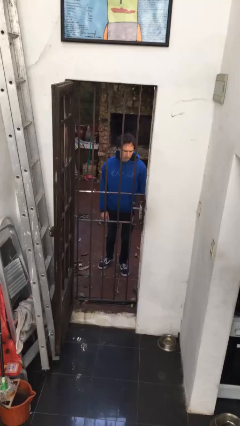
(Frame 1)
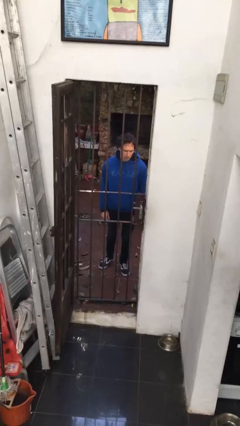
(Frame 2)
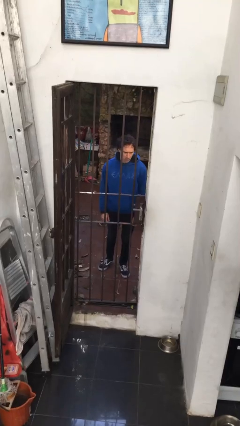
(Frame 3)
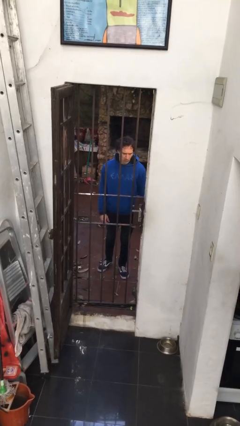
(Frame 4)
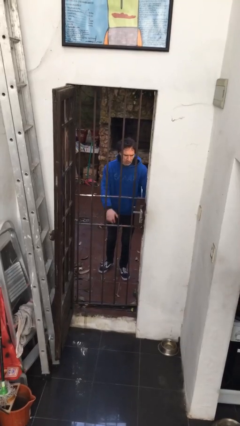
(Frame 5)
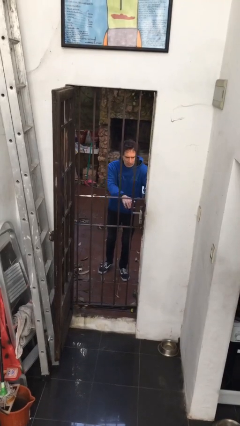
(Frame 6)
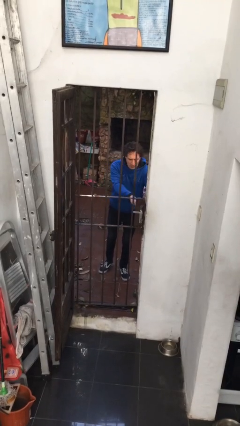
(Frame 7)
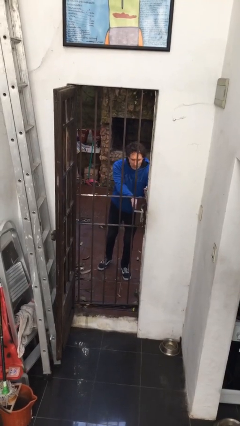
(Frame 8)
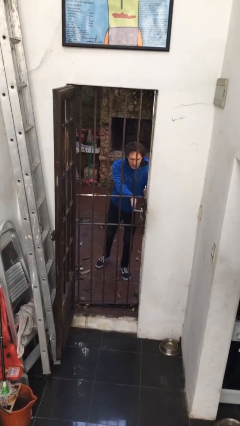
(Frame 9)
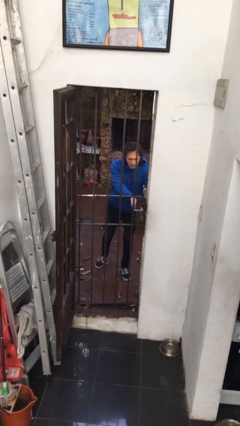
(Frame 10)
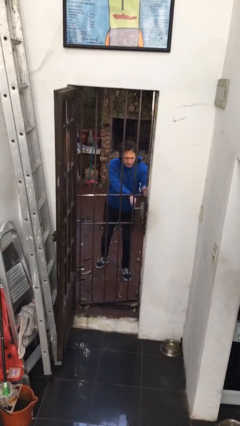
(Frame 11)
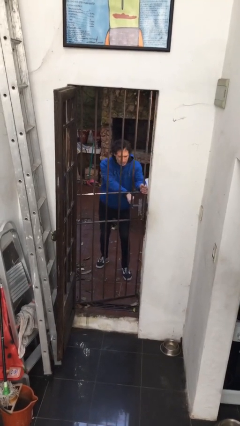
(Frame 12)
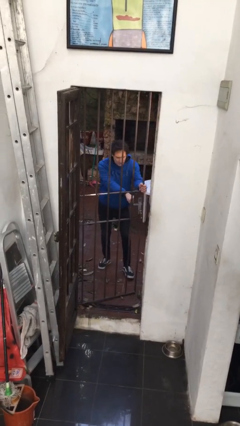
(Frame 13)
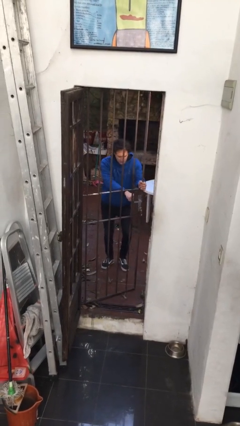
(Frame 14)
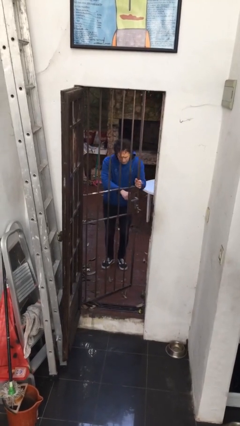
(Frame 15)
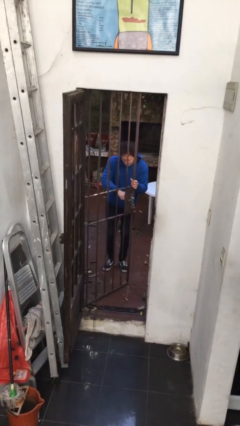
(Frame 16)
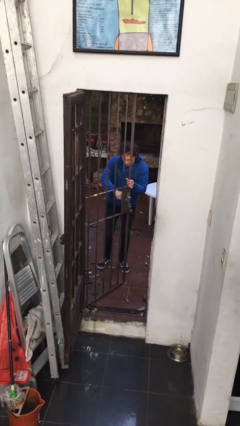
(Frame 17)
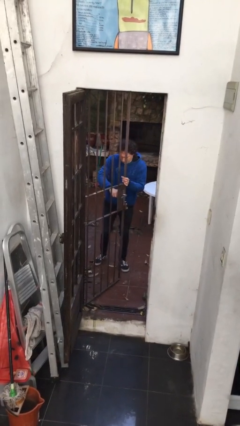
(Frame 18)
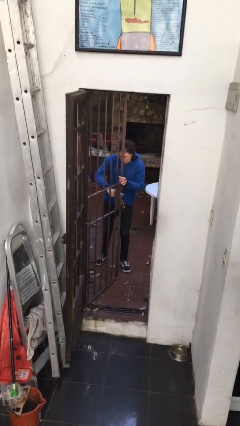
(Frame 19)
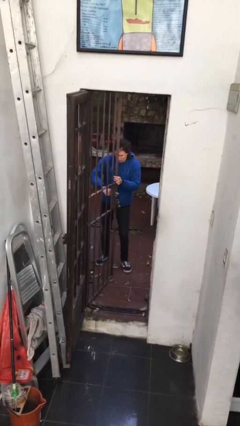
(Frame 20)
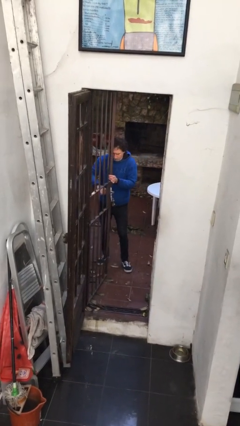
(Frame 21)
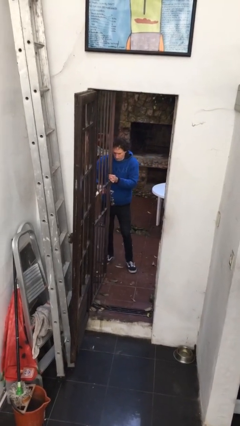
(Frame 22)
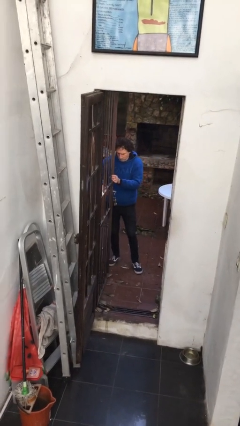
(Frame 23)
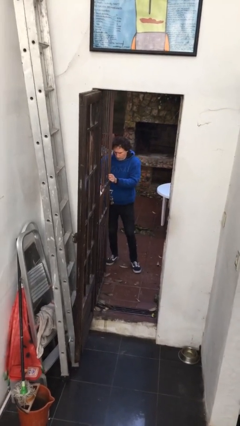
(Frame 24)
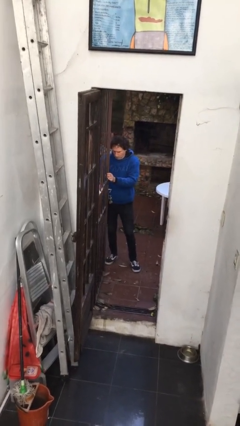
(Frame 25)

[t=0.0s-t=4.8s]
person opens gate

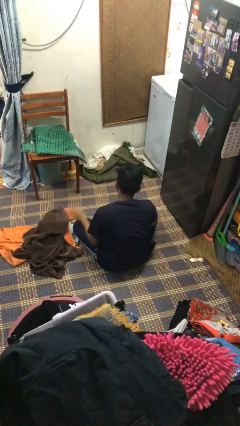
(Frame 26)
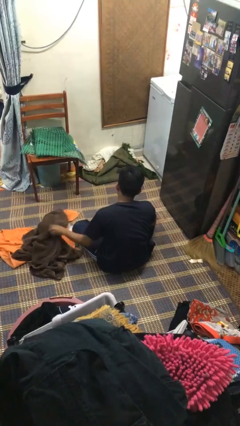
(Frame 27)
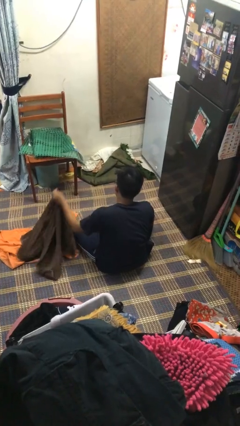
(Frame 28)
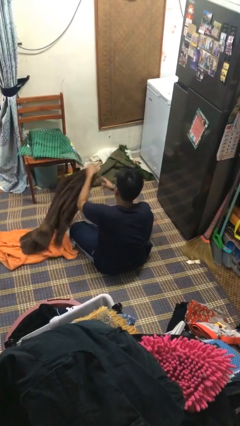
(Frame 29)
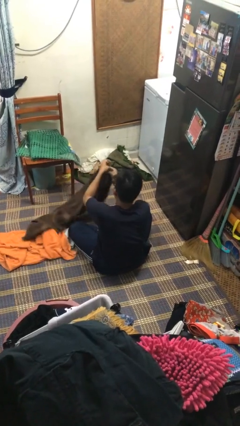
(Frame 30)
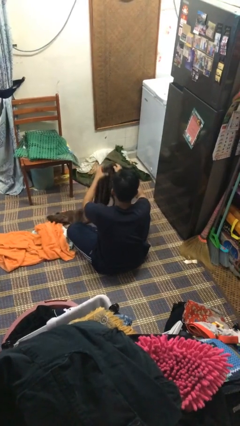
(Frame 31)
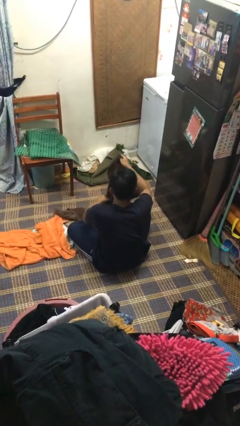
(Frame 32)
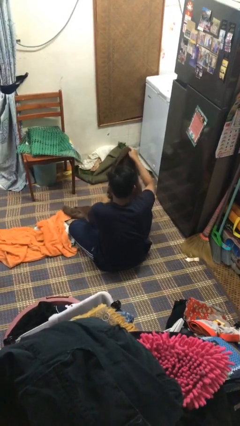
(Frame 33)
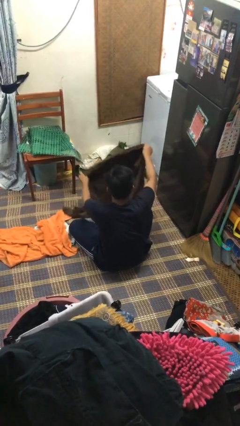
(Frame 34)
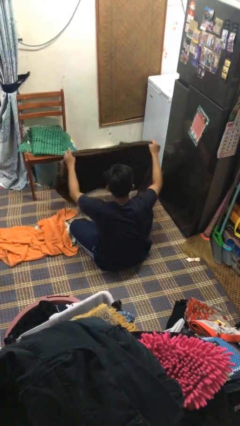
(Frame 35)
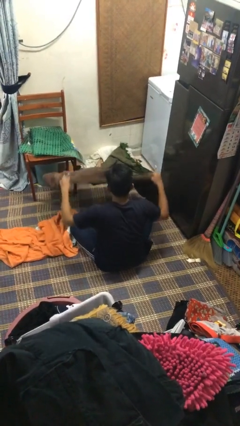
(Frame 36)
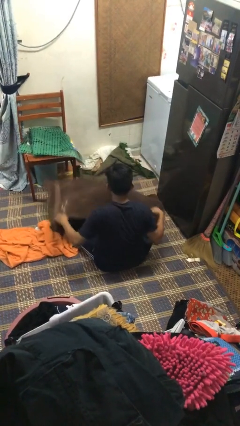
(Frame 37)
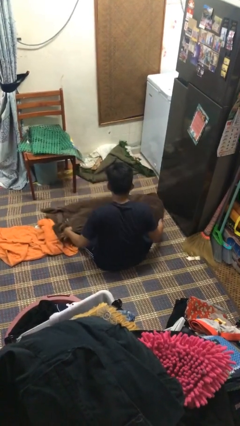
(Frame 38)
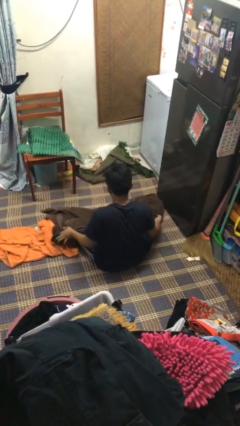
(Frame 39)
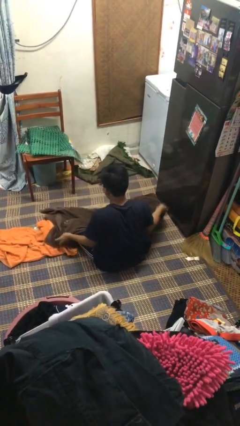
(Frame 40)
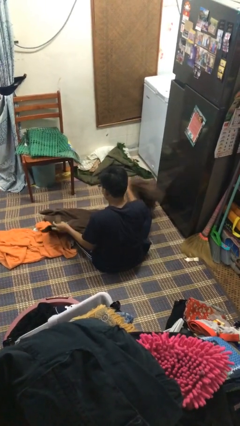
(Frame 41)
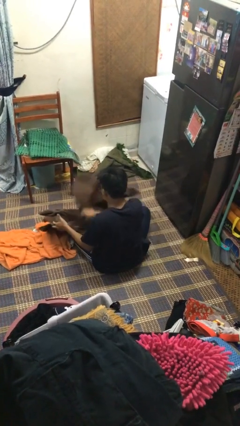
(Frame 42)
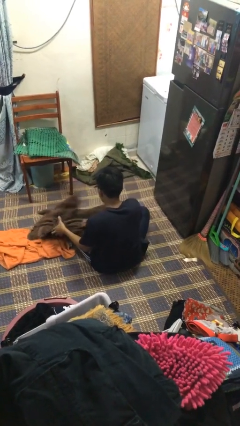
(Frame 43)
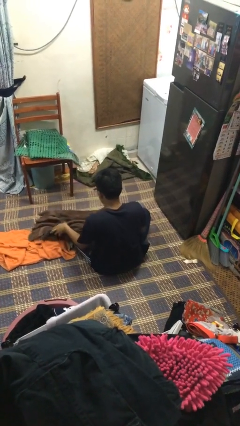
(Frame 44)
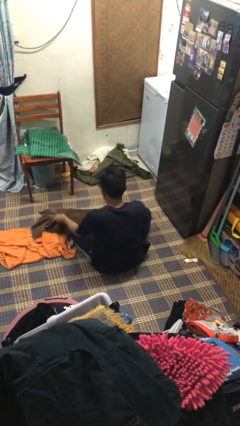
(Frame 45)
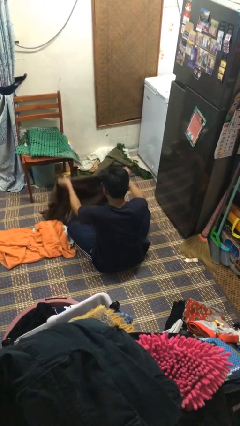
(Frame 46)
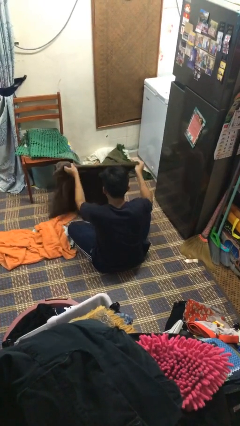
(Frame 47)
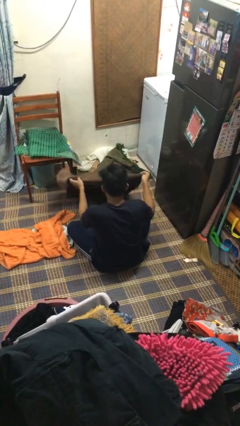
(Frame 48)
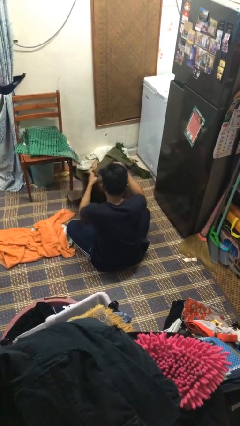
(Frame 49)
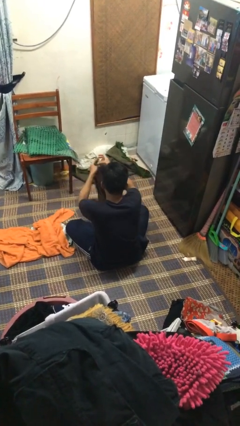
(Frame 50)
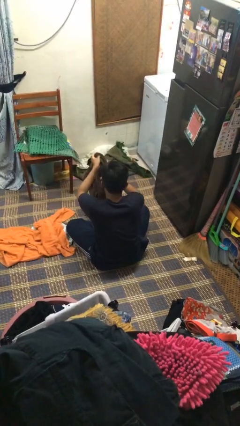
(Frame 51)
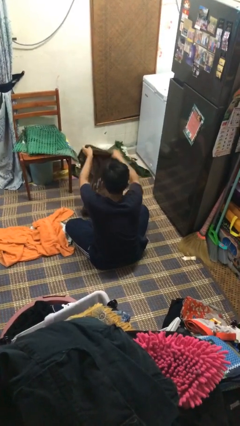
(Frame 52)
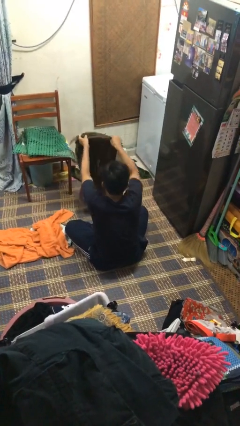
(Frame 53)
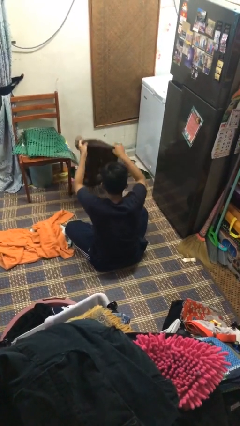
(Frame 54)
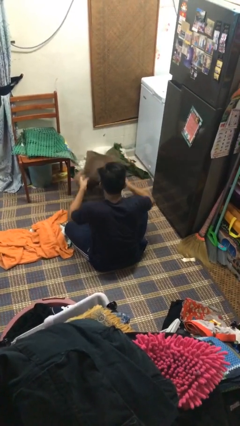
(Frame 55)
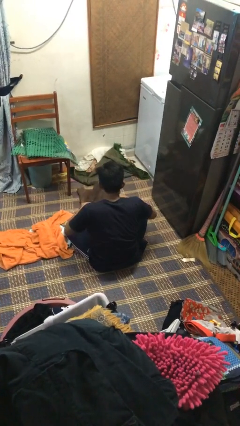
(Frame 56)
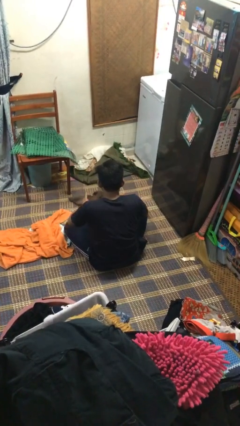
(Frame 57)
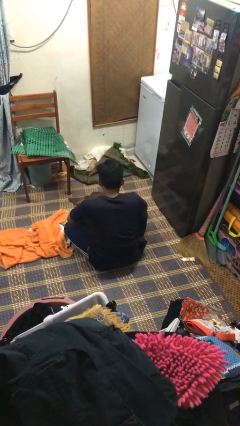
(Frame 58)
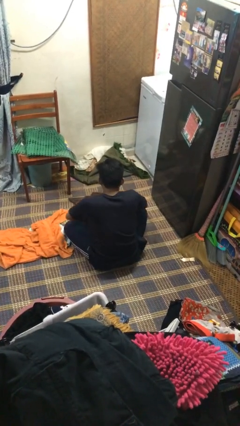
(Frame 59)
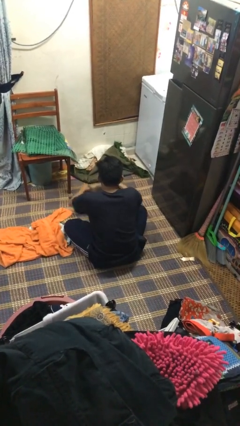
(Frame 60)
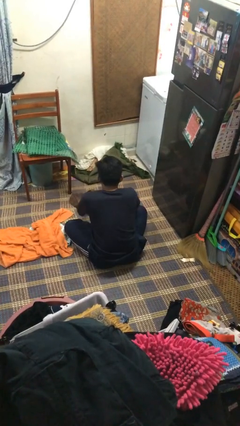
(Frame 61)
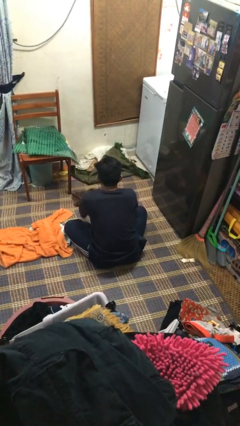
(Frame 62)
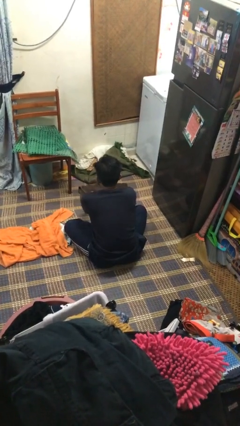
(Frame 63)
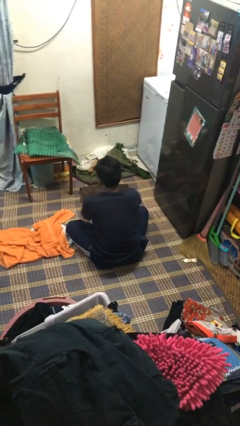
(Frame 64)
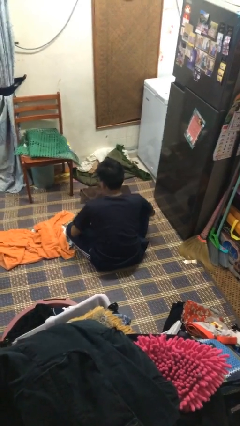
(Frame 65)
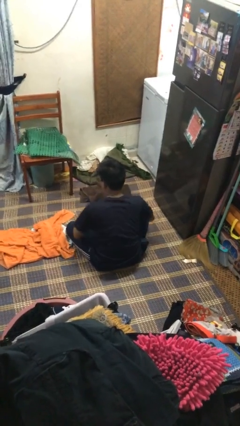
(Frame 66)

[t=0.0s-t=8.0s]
person folds towel

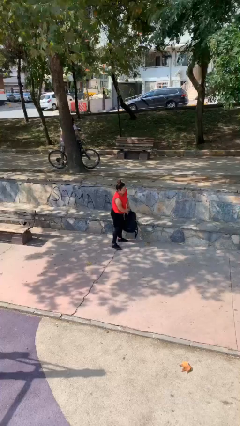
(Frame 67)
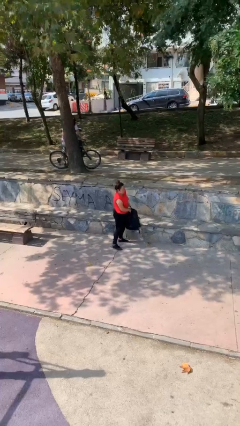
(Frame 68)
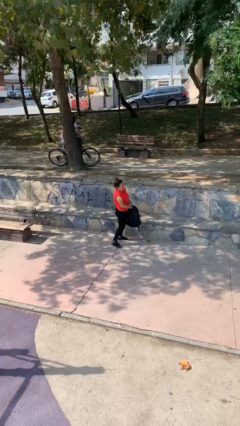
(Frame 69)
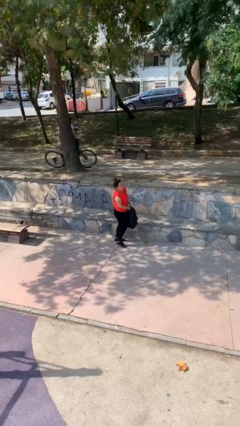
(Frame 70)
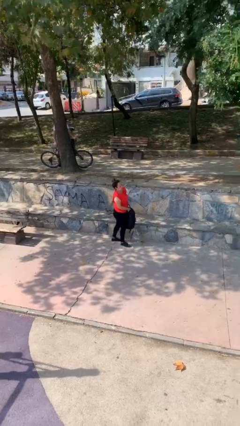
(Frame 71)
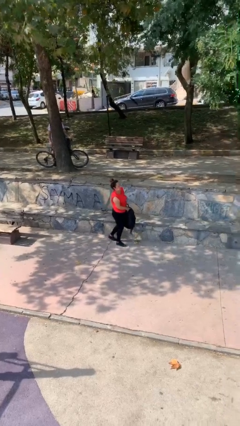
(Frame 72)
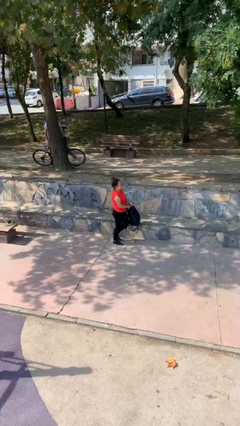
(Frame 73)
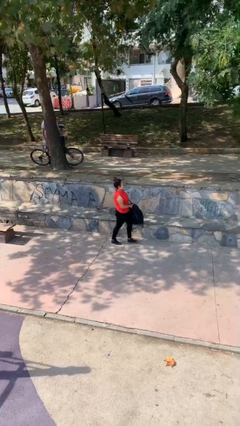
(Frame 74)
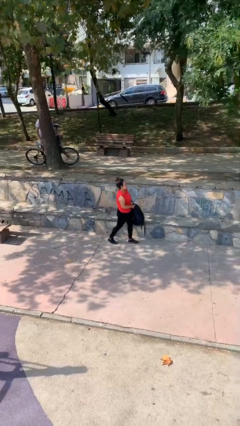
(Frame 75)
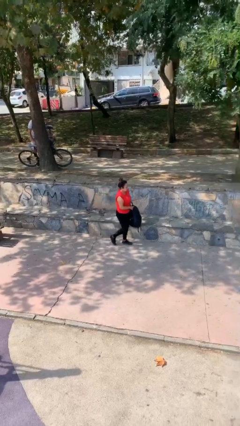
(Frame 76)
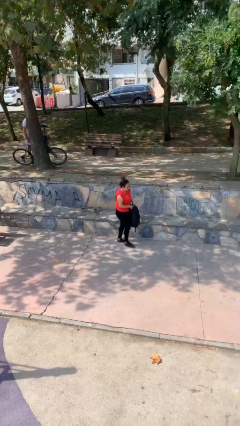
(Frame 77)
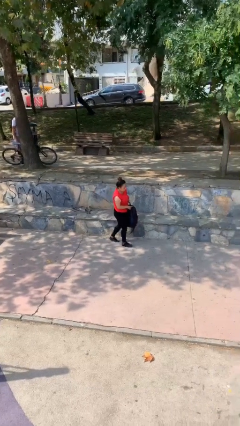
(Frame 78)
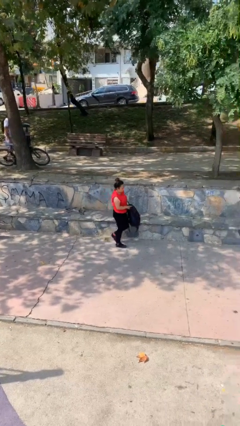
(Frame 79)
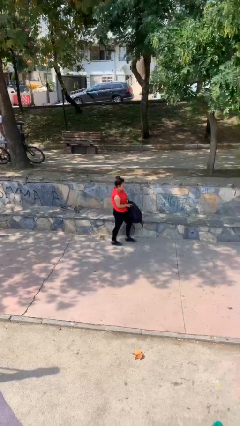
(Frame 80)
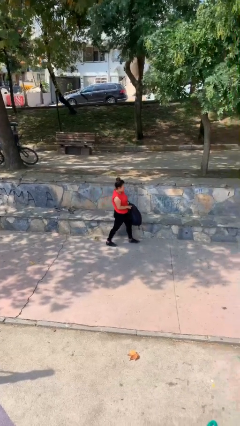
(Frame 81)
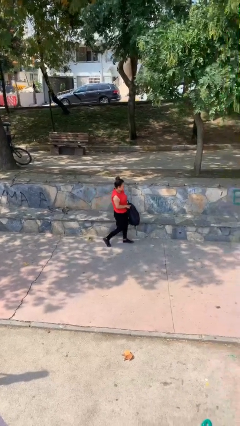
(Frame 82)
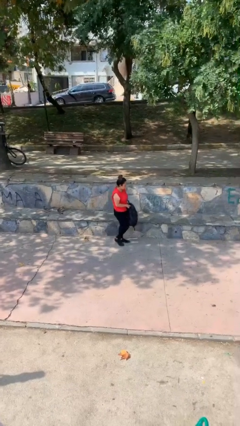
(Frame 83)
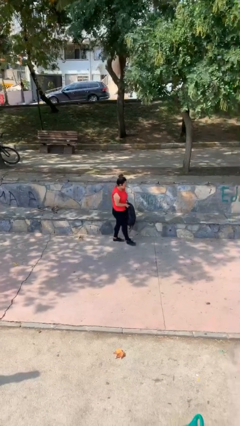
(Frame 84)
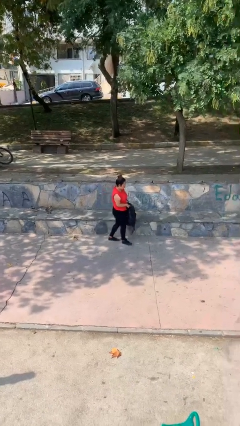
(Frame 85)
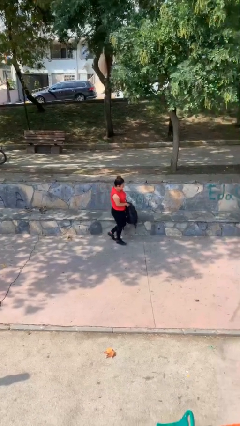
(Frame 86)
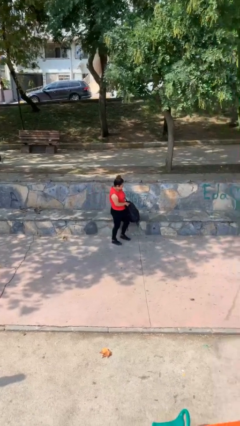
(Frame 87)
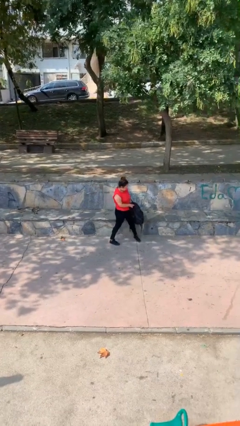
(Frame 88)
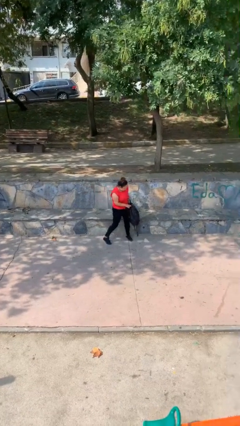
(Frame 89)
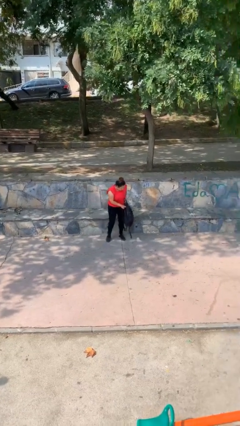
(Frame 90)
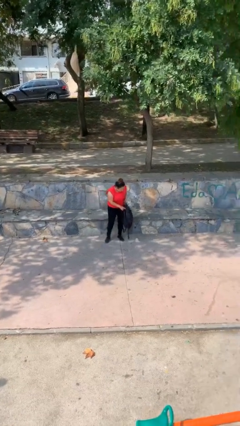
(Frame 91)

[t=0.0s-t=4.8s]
person carries heavy object

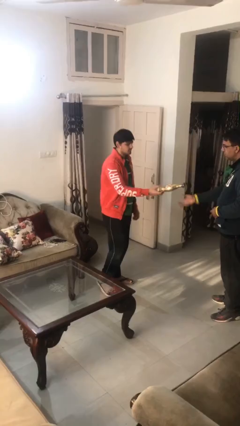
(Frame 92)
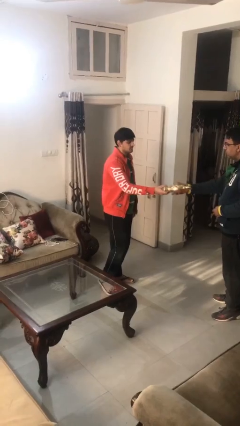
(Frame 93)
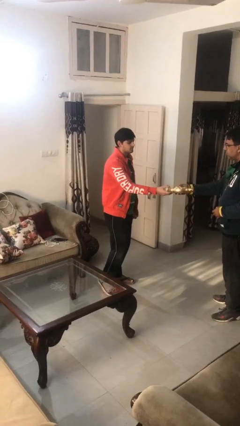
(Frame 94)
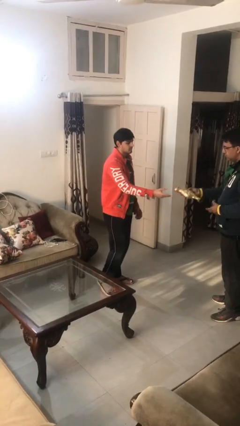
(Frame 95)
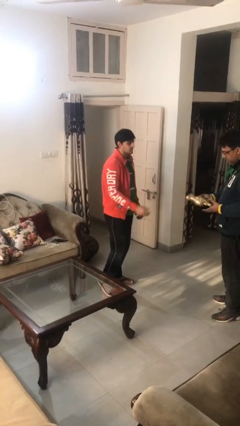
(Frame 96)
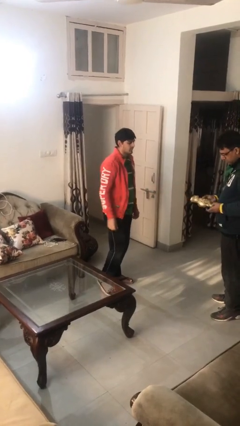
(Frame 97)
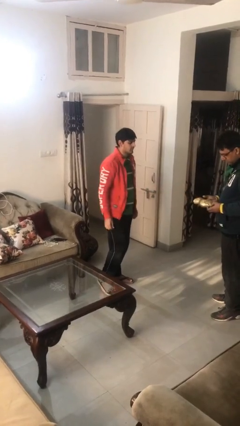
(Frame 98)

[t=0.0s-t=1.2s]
person transfers object to person
